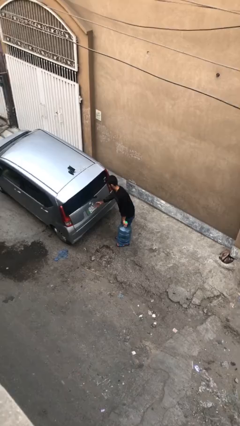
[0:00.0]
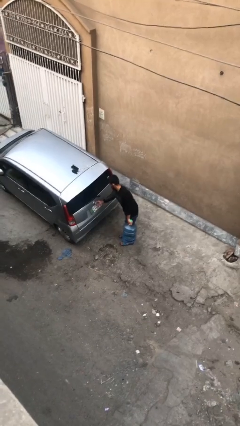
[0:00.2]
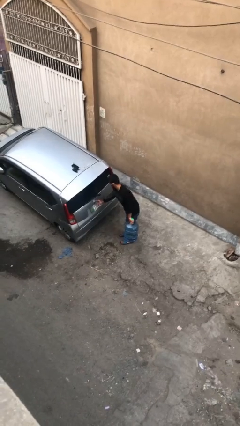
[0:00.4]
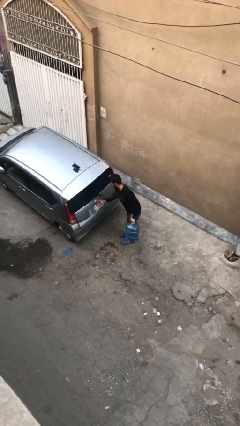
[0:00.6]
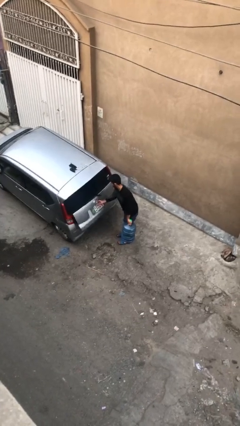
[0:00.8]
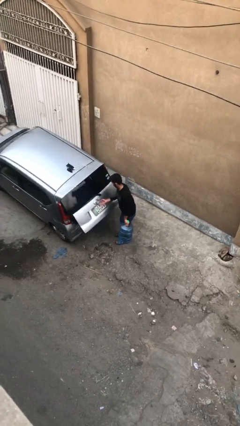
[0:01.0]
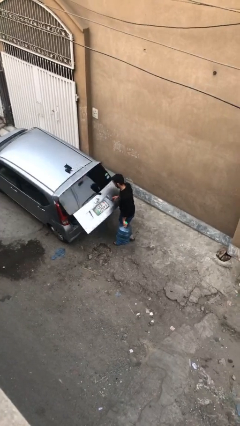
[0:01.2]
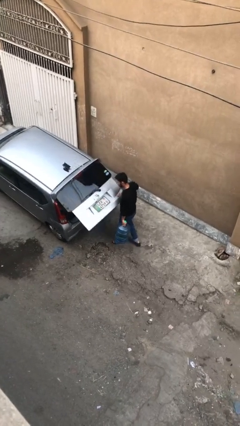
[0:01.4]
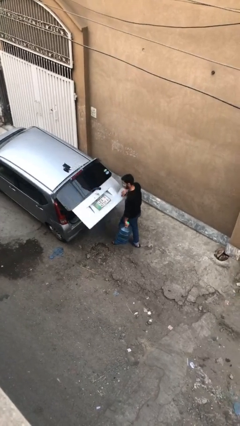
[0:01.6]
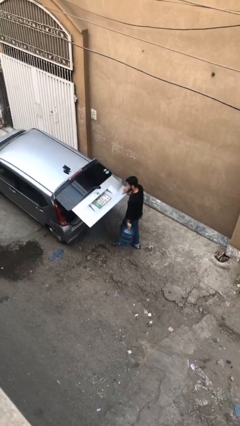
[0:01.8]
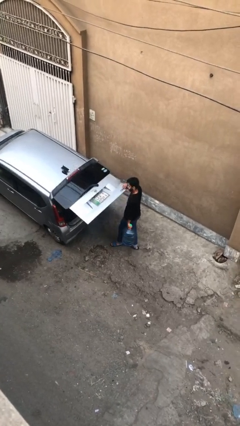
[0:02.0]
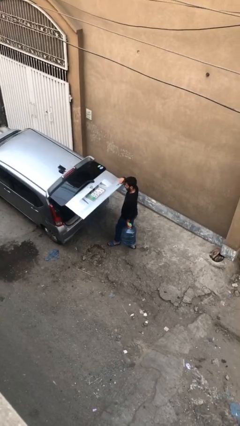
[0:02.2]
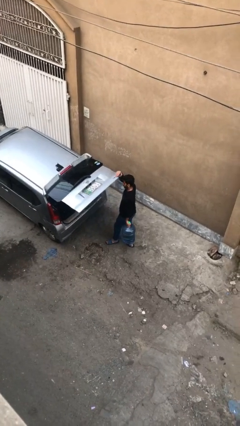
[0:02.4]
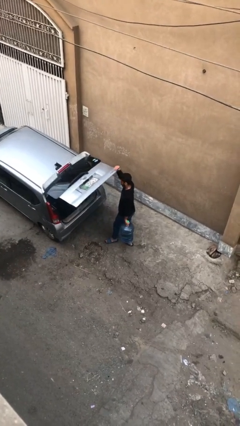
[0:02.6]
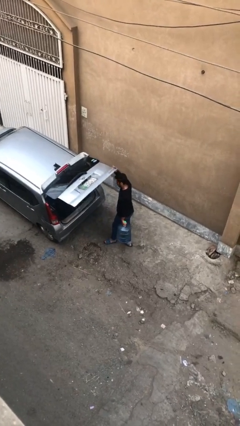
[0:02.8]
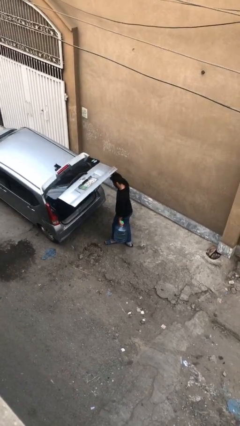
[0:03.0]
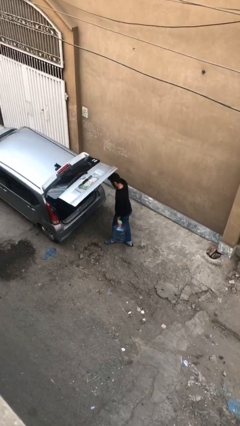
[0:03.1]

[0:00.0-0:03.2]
person opens car trunk

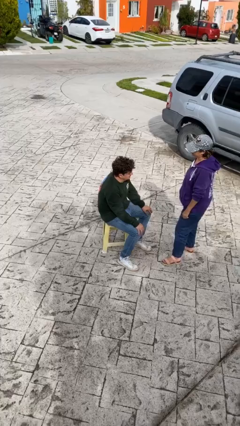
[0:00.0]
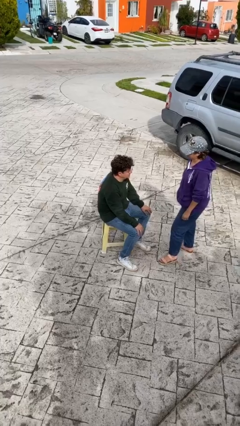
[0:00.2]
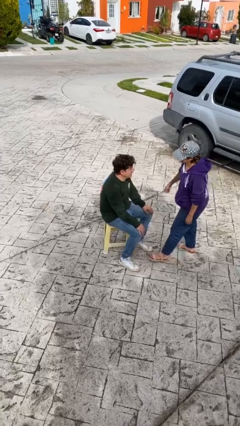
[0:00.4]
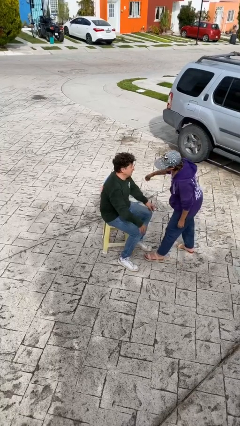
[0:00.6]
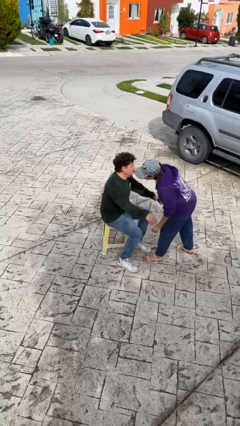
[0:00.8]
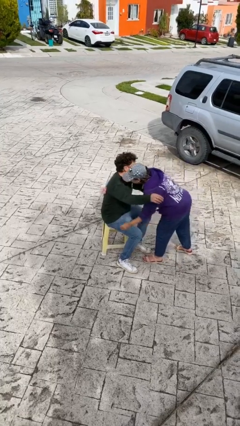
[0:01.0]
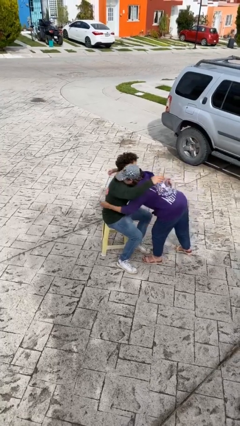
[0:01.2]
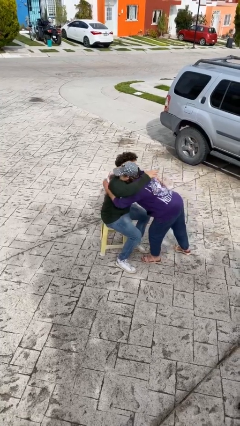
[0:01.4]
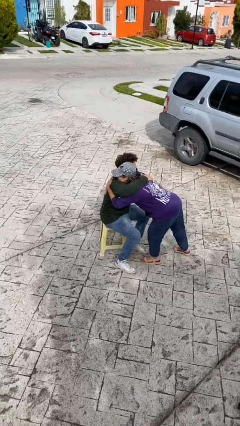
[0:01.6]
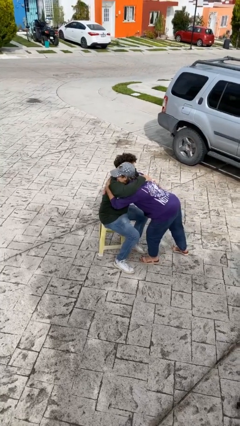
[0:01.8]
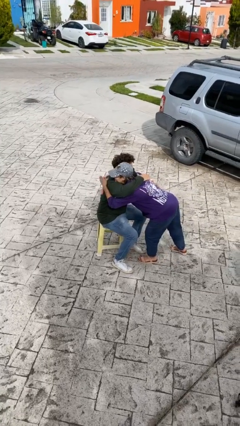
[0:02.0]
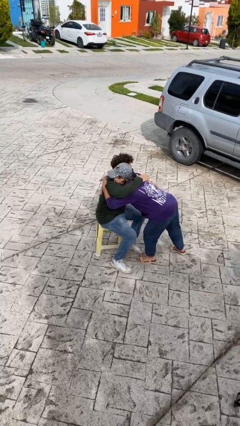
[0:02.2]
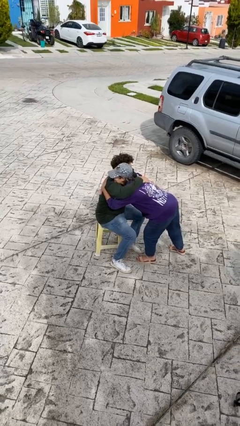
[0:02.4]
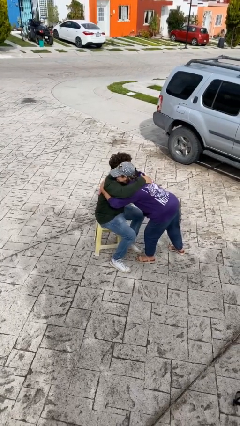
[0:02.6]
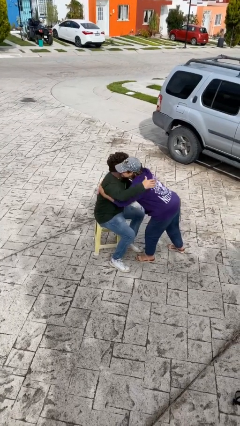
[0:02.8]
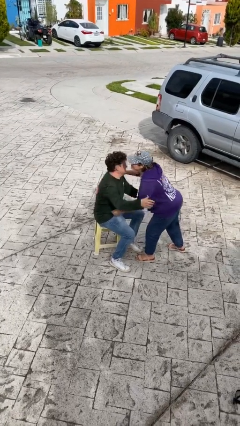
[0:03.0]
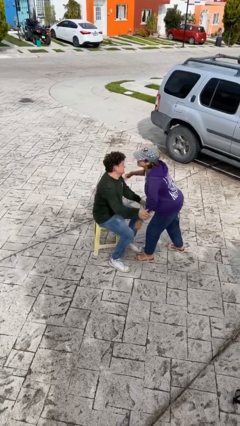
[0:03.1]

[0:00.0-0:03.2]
person embraces person

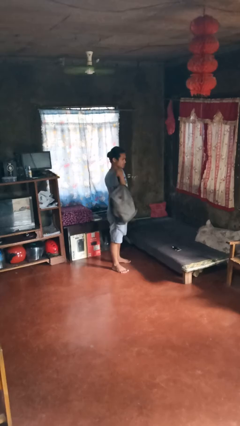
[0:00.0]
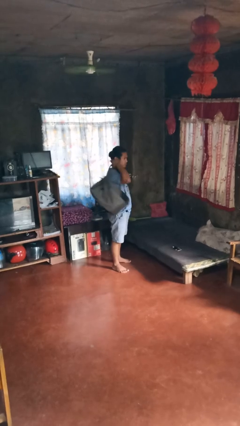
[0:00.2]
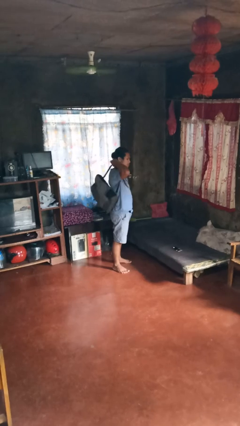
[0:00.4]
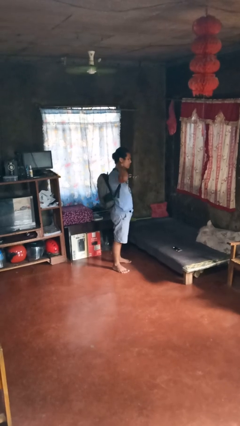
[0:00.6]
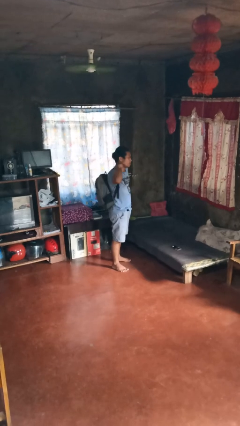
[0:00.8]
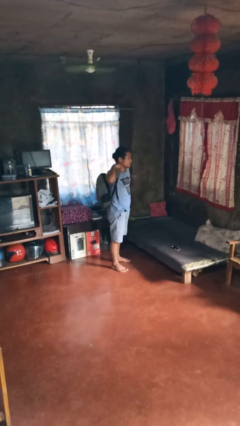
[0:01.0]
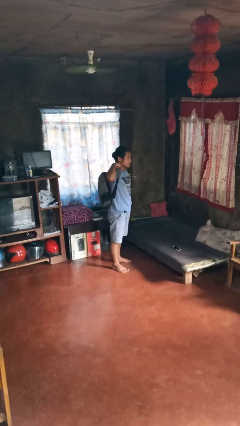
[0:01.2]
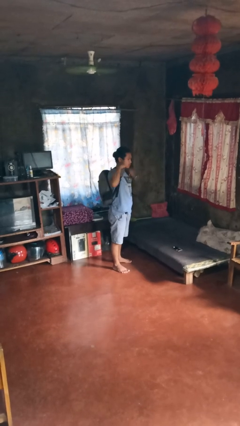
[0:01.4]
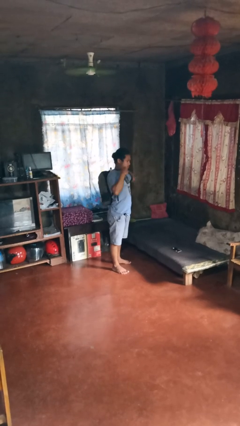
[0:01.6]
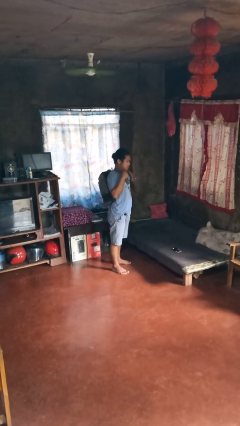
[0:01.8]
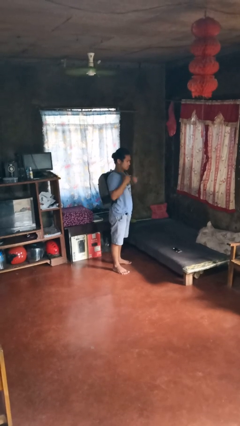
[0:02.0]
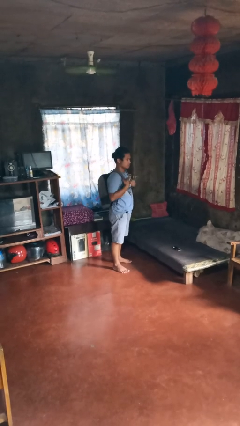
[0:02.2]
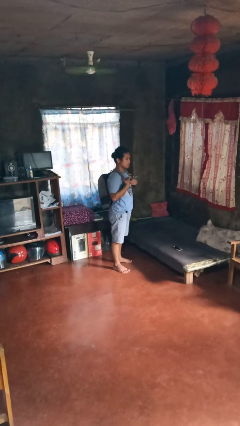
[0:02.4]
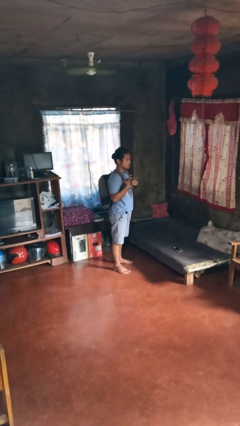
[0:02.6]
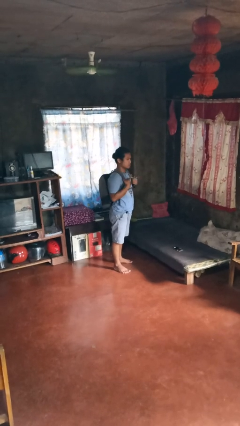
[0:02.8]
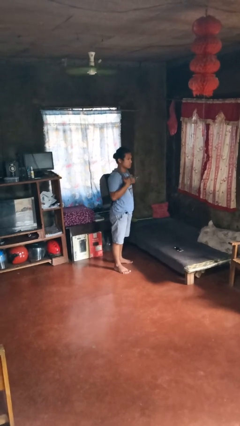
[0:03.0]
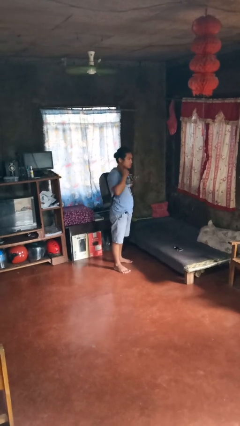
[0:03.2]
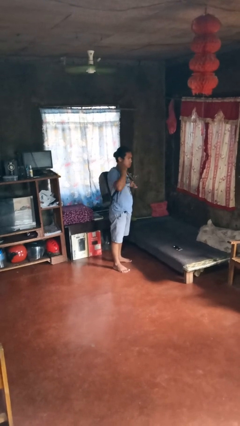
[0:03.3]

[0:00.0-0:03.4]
person puts on backpack

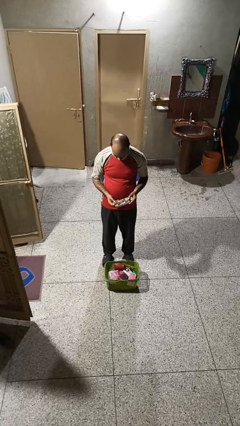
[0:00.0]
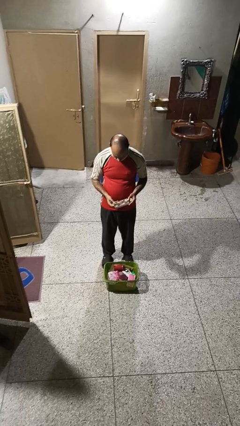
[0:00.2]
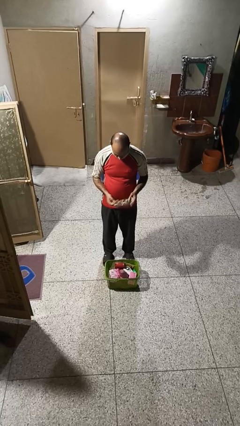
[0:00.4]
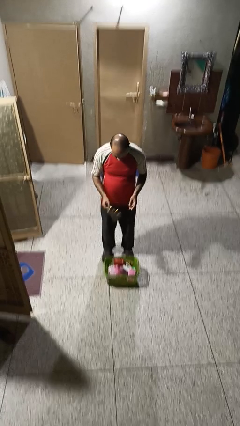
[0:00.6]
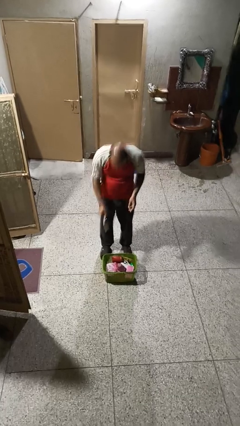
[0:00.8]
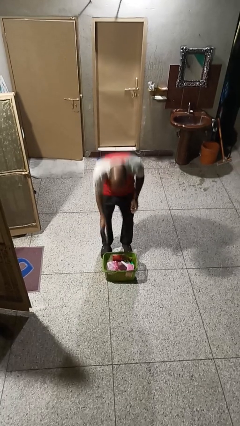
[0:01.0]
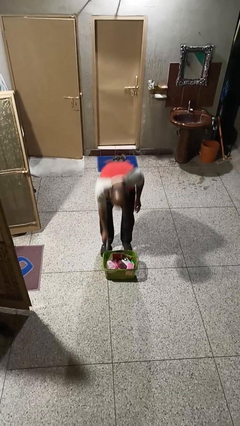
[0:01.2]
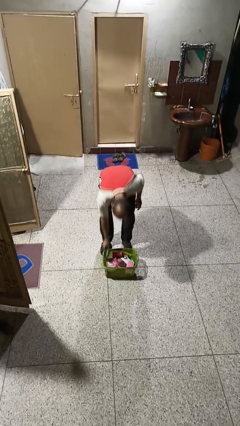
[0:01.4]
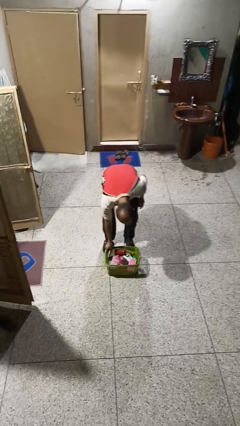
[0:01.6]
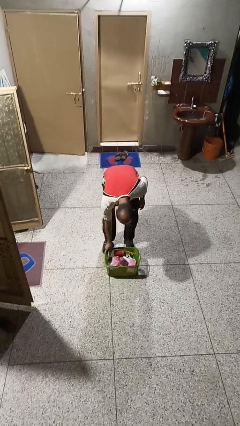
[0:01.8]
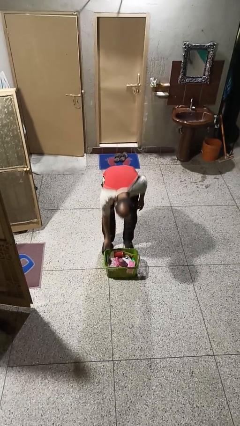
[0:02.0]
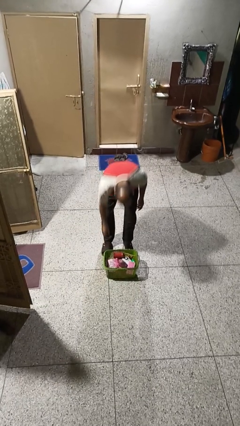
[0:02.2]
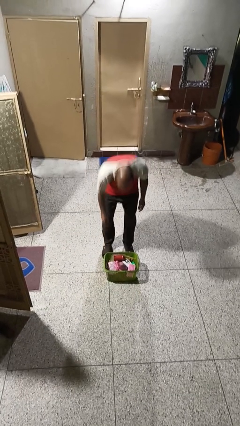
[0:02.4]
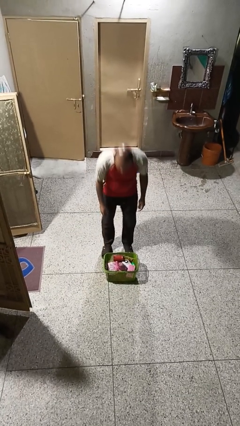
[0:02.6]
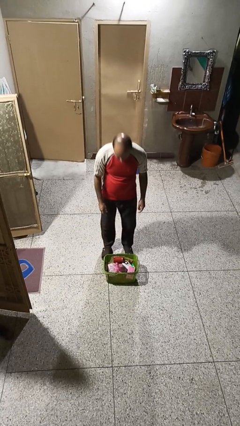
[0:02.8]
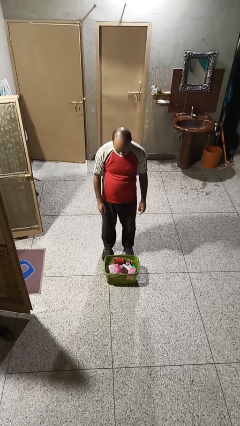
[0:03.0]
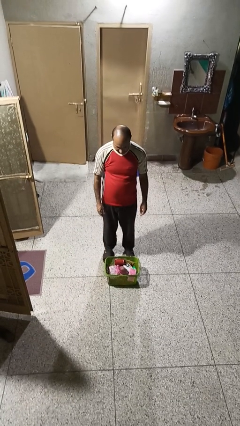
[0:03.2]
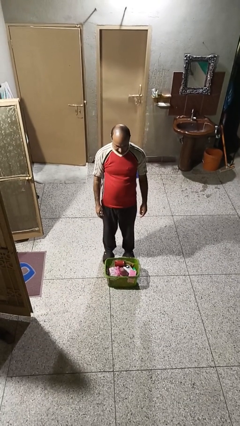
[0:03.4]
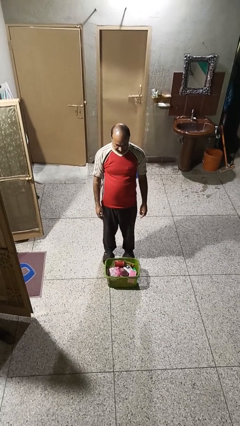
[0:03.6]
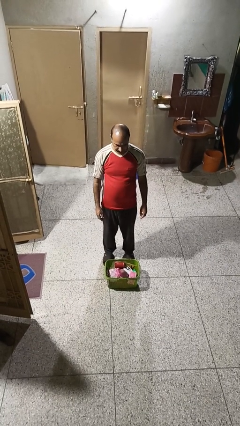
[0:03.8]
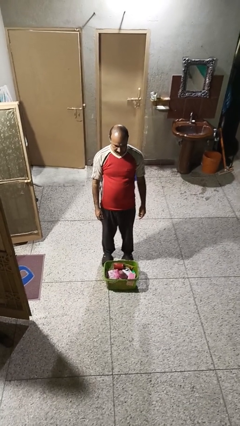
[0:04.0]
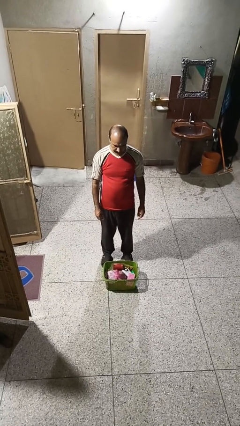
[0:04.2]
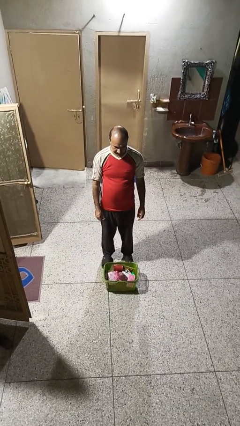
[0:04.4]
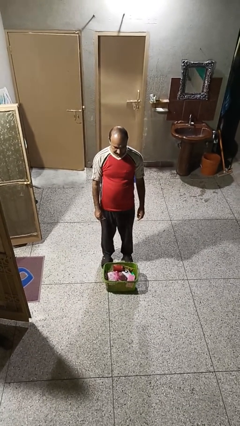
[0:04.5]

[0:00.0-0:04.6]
person puts object into basket

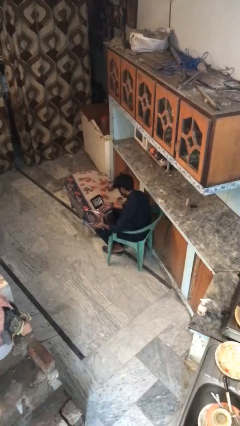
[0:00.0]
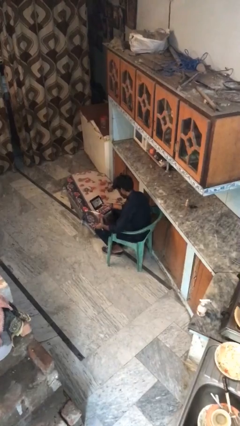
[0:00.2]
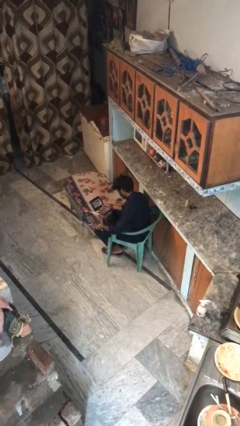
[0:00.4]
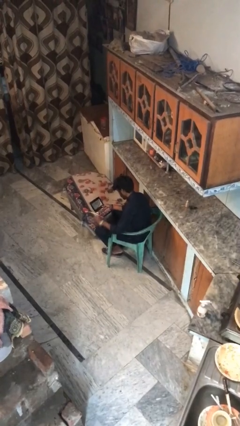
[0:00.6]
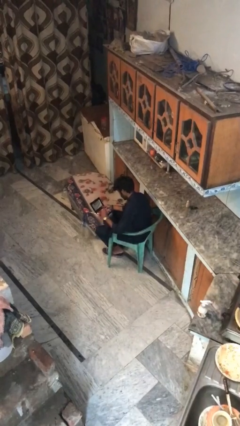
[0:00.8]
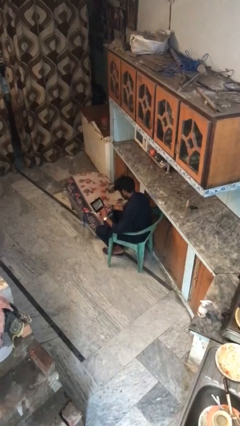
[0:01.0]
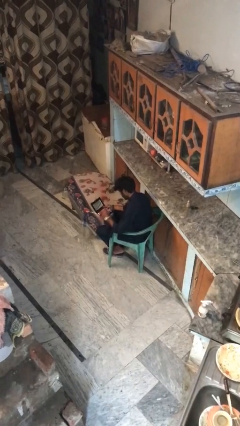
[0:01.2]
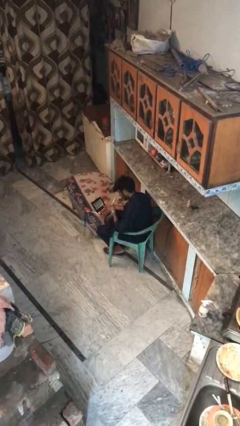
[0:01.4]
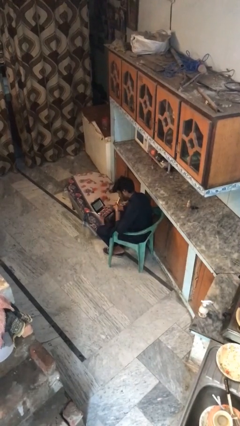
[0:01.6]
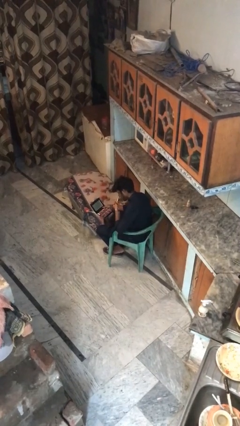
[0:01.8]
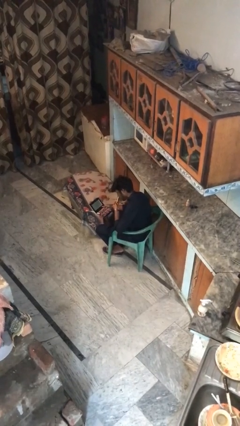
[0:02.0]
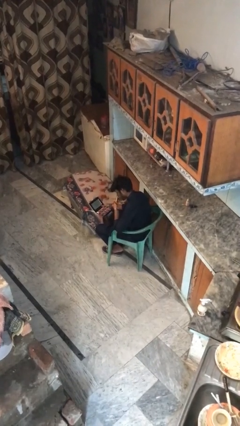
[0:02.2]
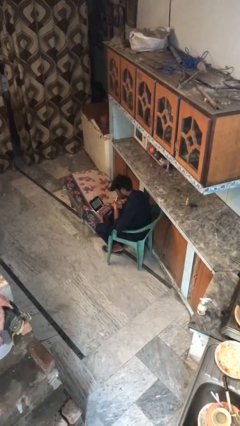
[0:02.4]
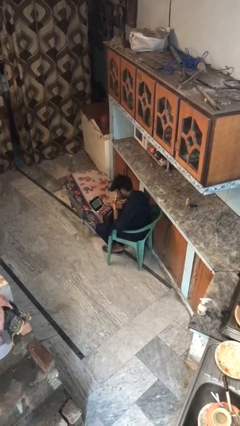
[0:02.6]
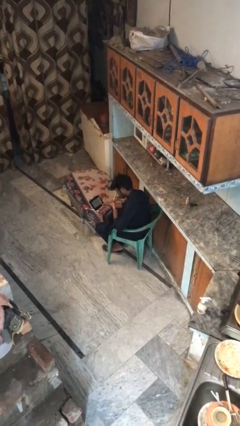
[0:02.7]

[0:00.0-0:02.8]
person applies eye makeup

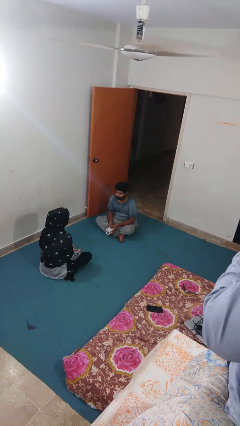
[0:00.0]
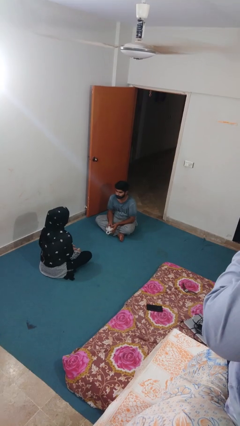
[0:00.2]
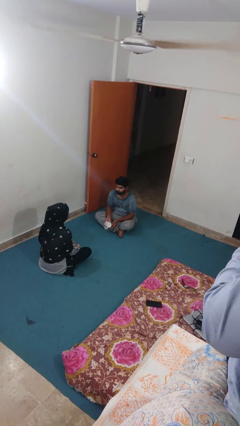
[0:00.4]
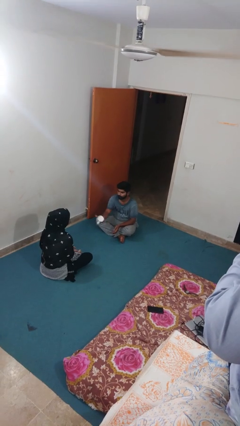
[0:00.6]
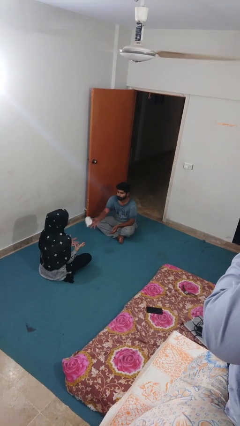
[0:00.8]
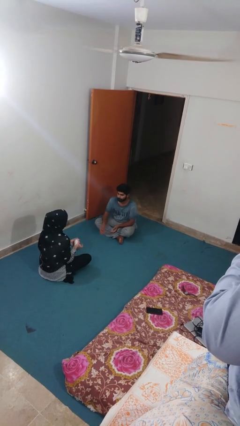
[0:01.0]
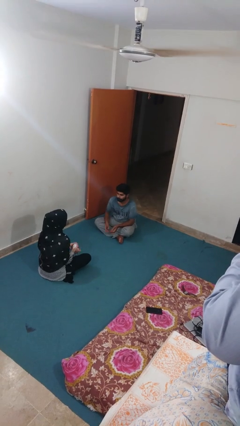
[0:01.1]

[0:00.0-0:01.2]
person throws object to person
